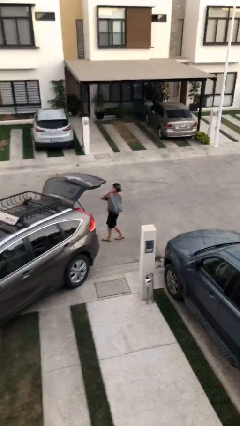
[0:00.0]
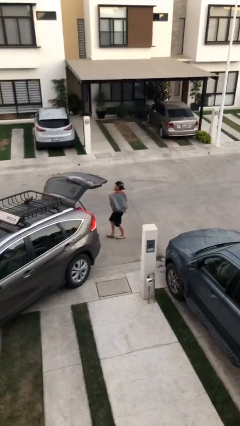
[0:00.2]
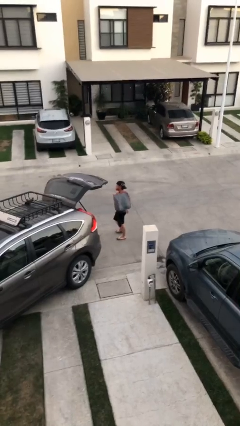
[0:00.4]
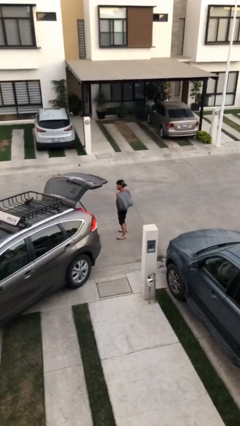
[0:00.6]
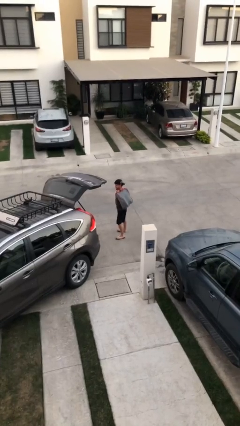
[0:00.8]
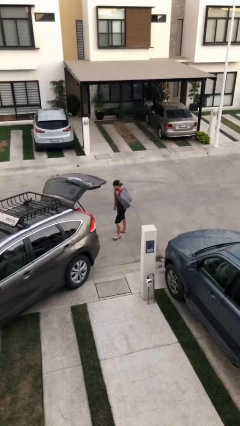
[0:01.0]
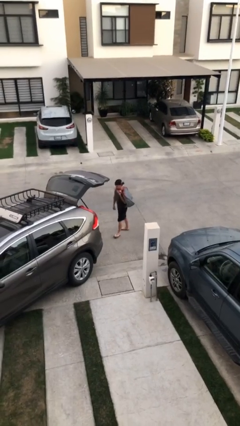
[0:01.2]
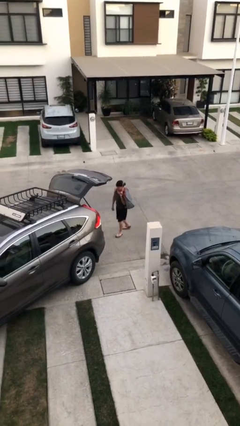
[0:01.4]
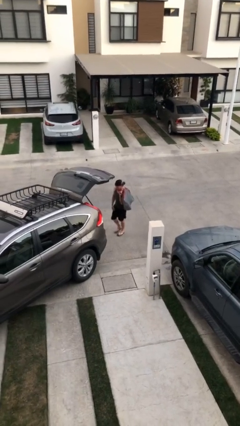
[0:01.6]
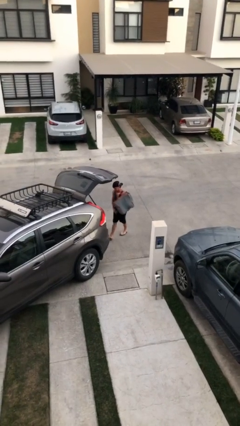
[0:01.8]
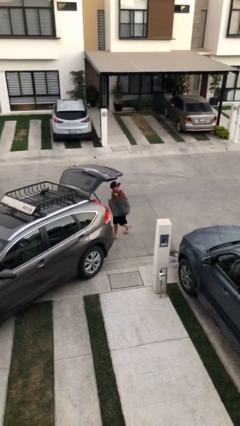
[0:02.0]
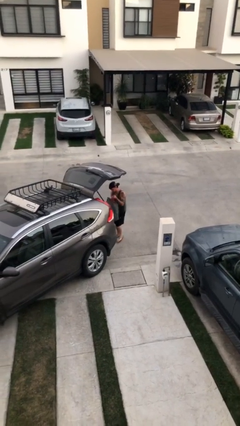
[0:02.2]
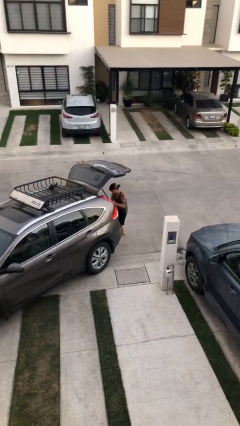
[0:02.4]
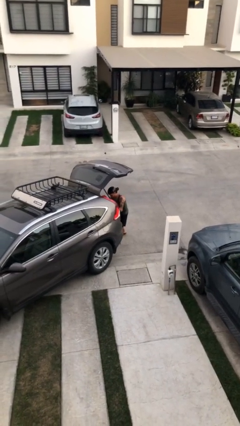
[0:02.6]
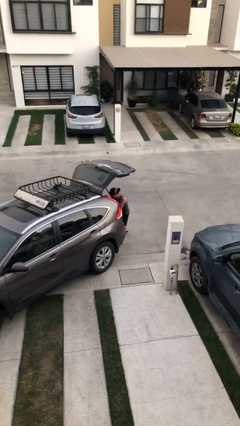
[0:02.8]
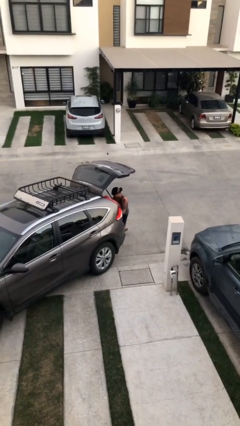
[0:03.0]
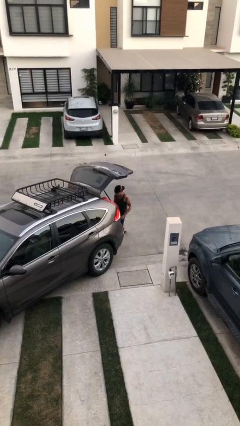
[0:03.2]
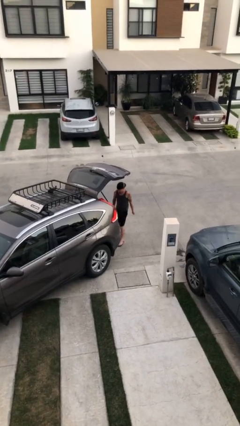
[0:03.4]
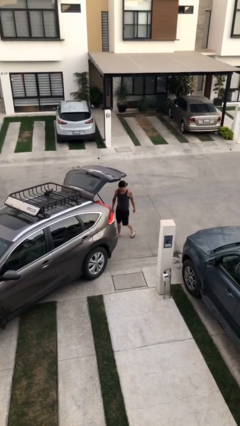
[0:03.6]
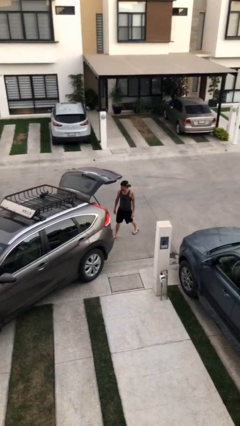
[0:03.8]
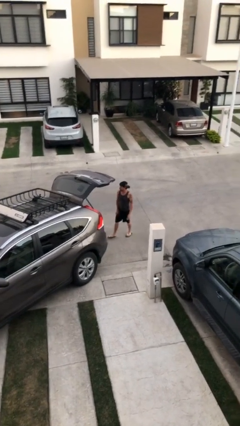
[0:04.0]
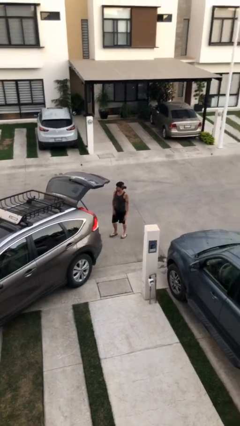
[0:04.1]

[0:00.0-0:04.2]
person loads car

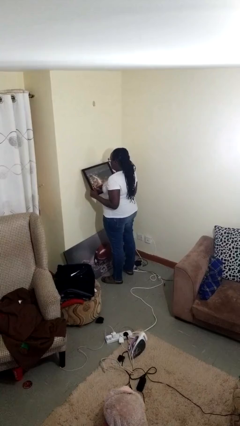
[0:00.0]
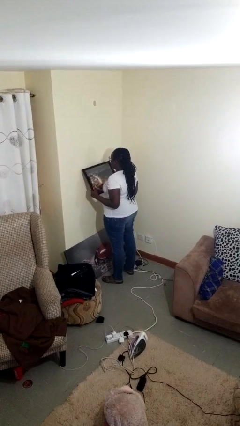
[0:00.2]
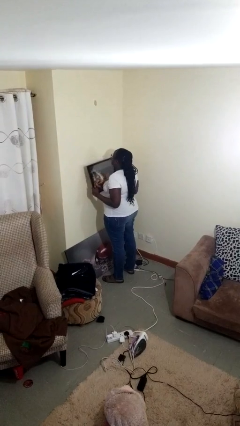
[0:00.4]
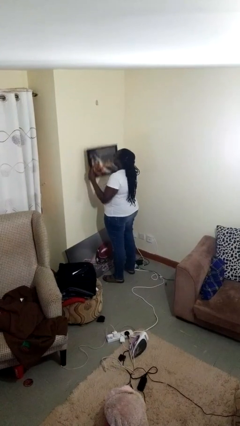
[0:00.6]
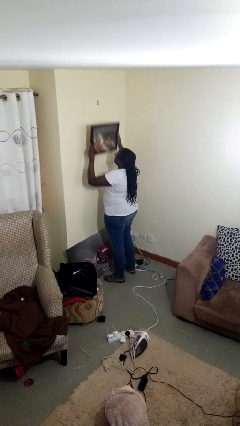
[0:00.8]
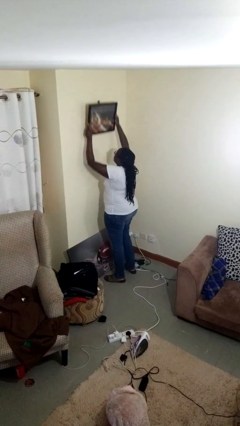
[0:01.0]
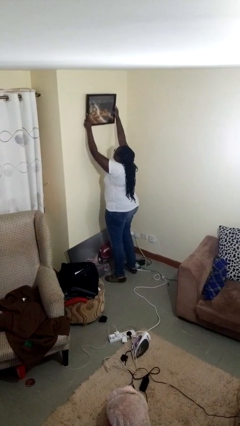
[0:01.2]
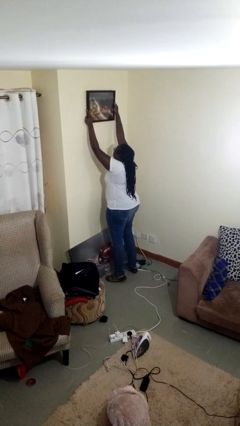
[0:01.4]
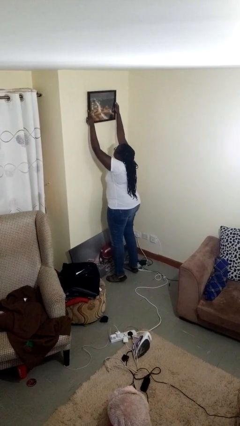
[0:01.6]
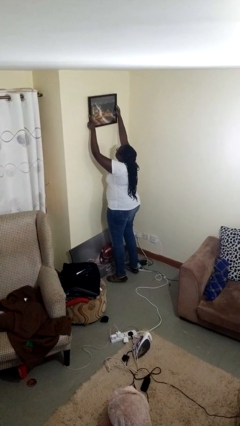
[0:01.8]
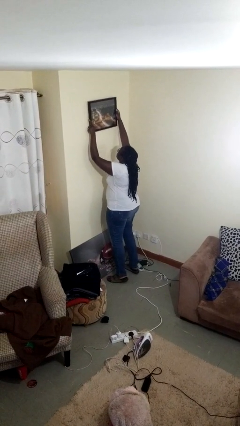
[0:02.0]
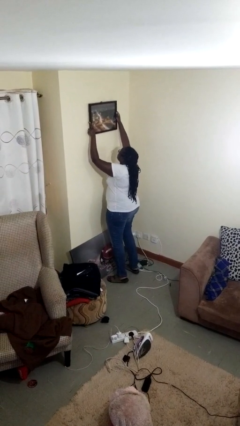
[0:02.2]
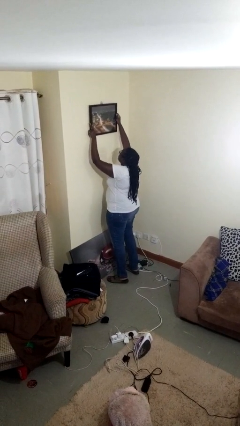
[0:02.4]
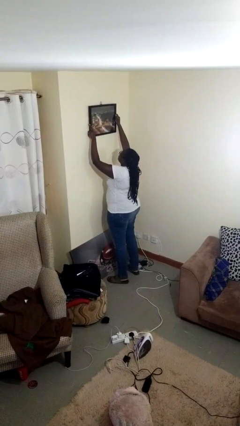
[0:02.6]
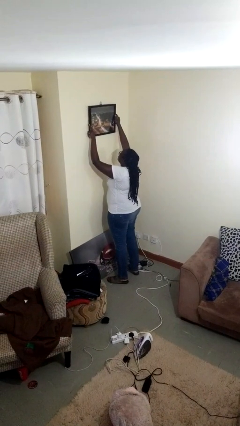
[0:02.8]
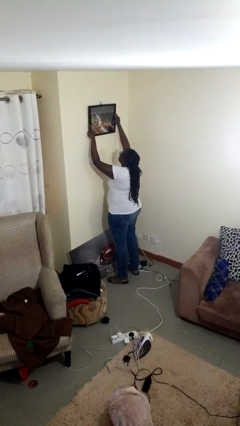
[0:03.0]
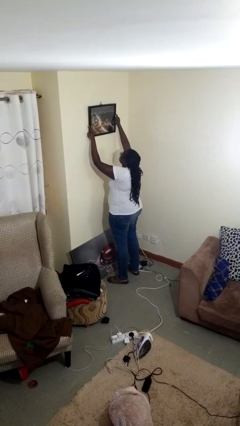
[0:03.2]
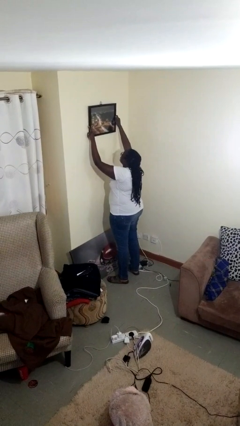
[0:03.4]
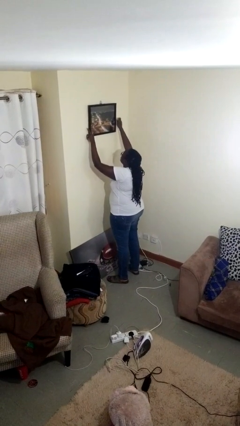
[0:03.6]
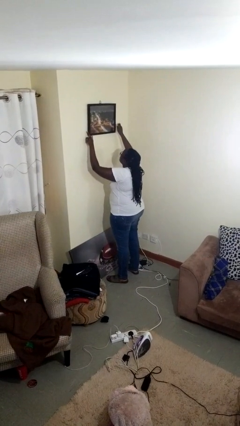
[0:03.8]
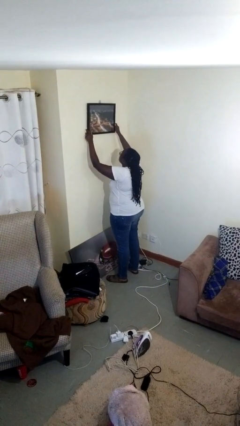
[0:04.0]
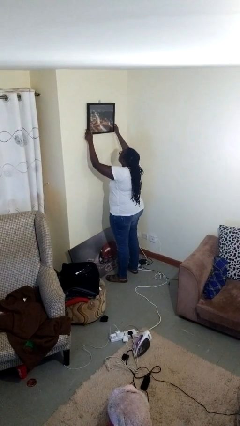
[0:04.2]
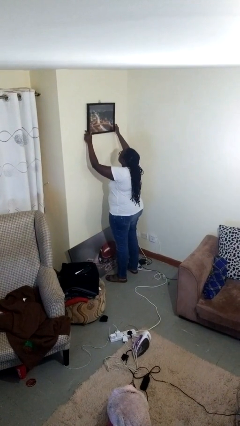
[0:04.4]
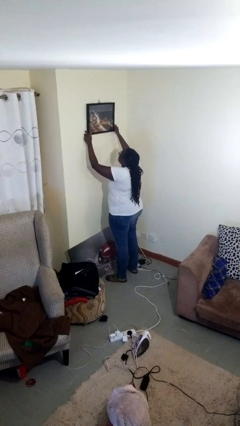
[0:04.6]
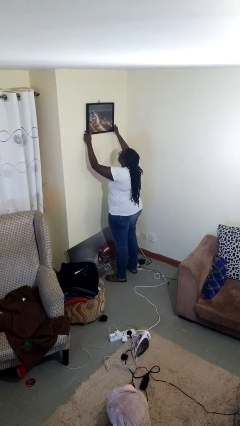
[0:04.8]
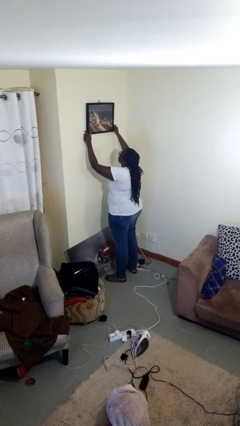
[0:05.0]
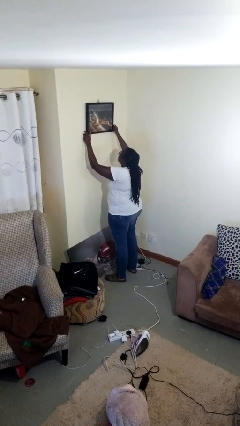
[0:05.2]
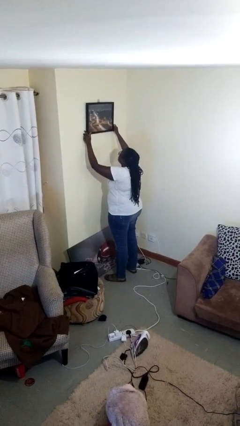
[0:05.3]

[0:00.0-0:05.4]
person puts up picture frame

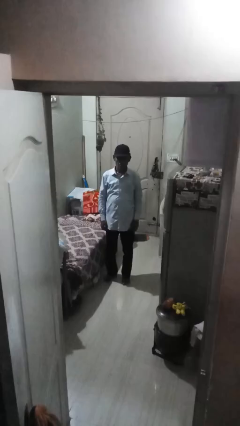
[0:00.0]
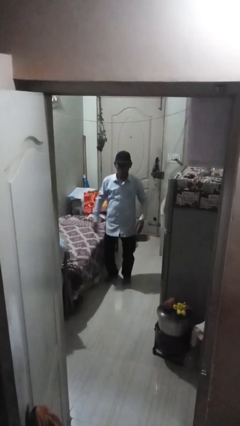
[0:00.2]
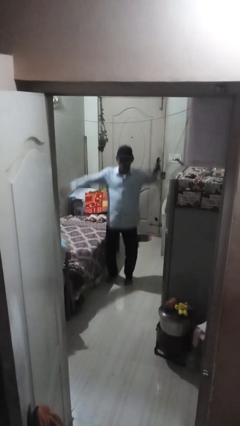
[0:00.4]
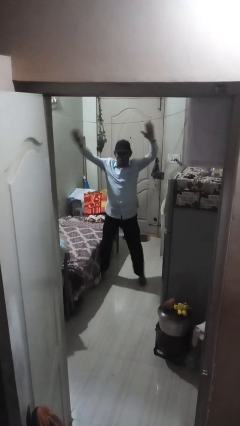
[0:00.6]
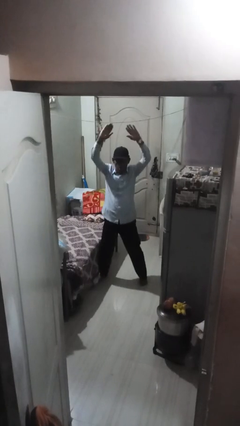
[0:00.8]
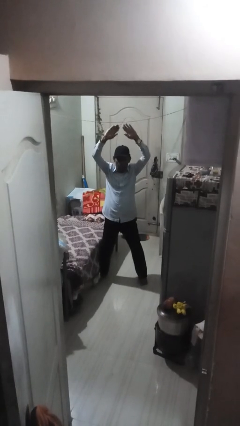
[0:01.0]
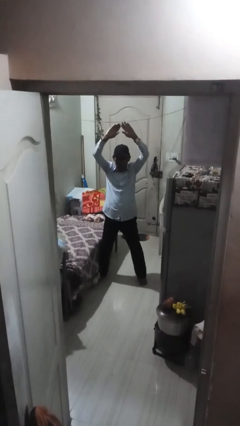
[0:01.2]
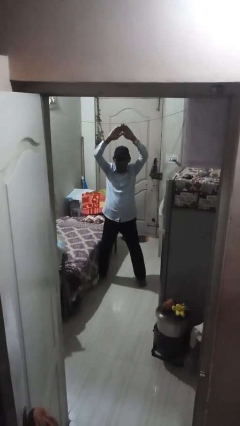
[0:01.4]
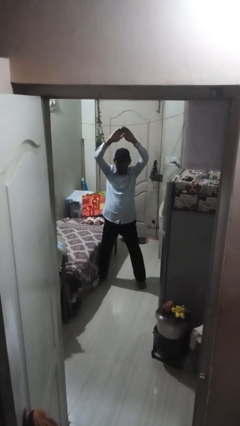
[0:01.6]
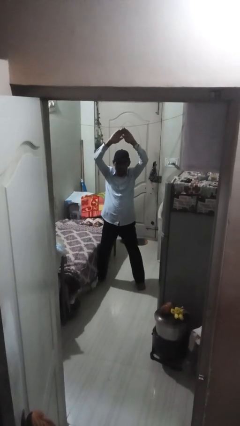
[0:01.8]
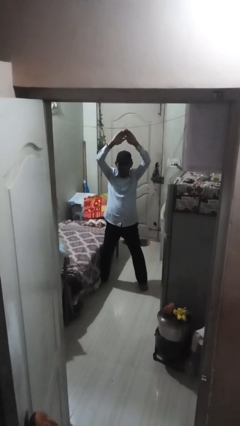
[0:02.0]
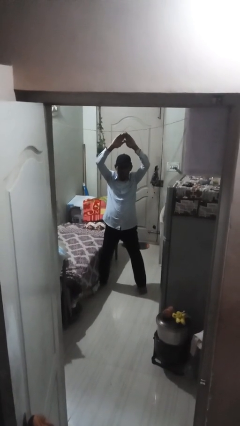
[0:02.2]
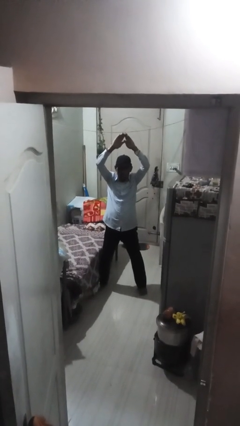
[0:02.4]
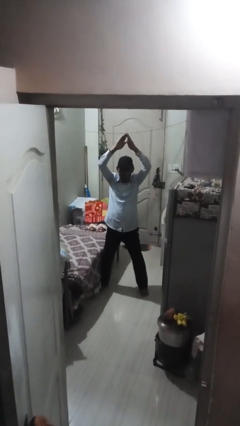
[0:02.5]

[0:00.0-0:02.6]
person exercises with jumping jacks

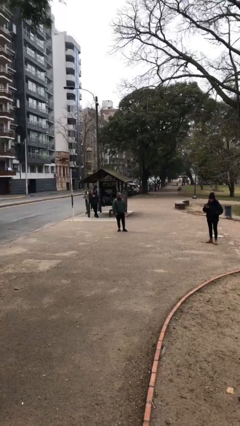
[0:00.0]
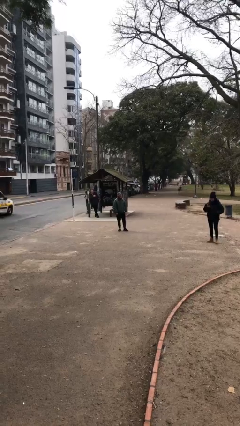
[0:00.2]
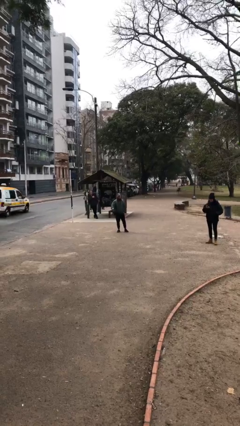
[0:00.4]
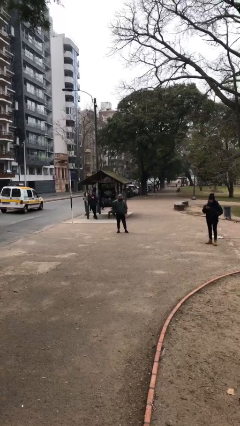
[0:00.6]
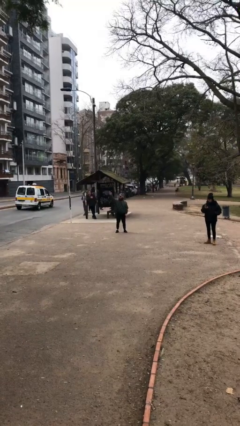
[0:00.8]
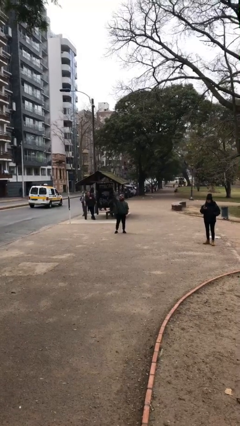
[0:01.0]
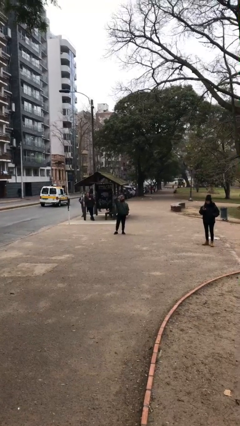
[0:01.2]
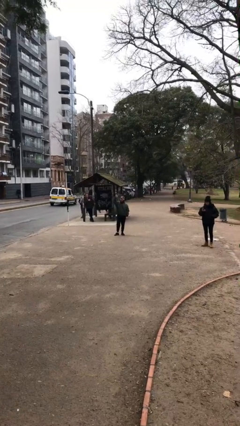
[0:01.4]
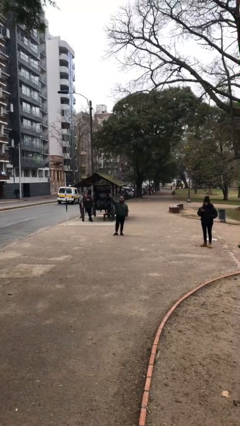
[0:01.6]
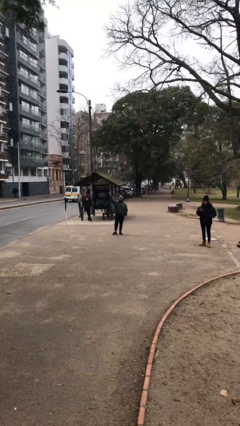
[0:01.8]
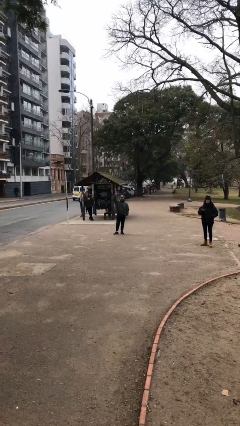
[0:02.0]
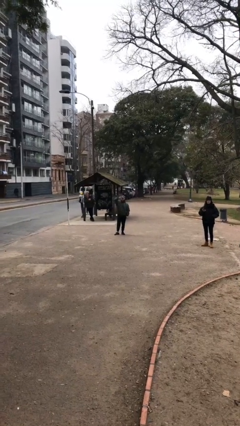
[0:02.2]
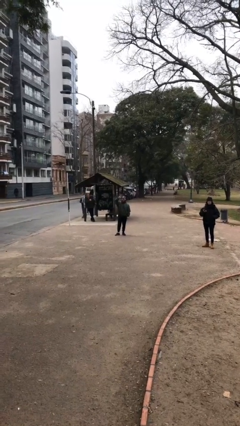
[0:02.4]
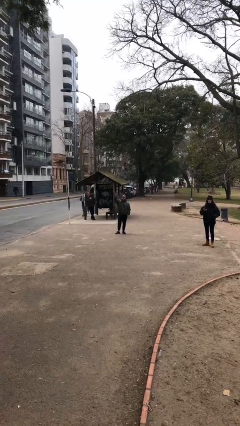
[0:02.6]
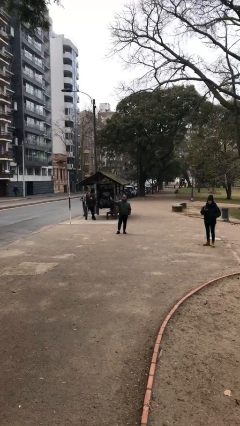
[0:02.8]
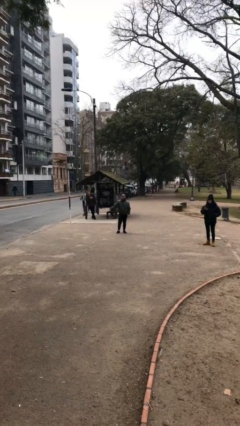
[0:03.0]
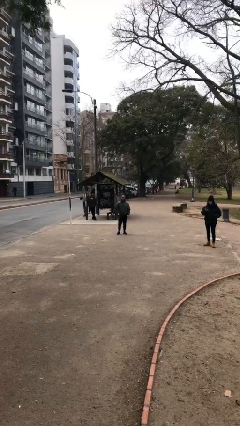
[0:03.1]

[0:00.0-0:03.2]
person waves at person

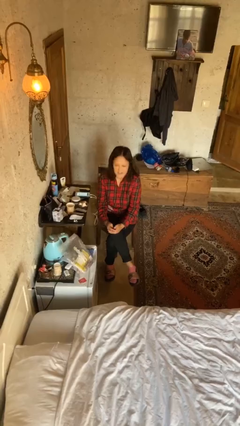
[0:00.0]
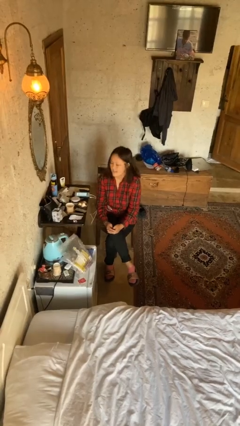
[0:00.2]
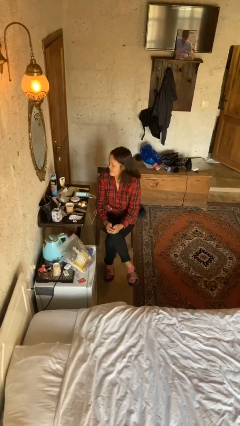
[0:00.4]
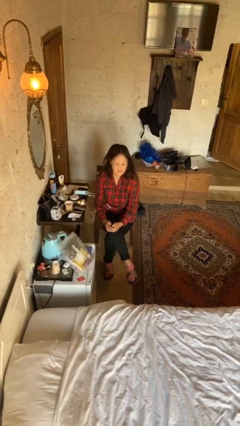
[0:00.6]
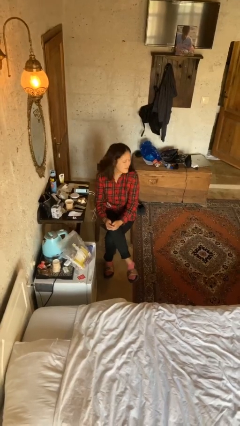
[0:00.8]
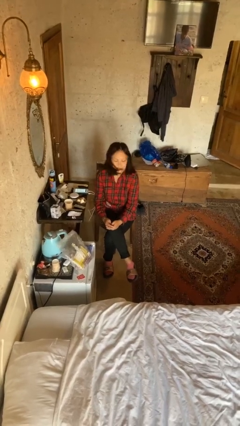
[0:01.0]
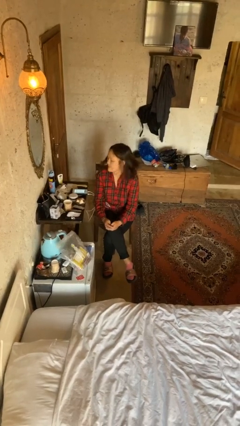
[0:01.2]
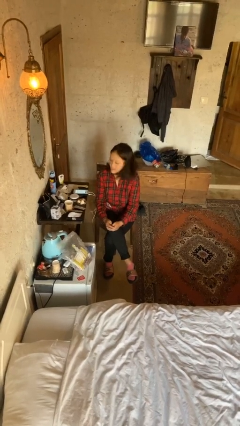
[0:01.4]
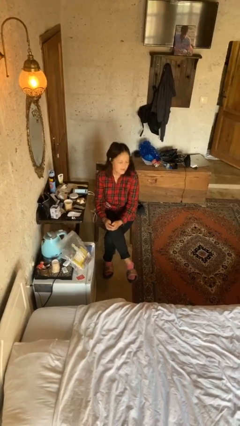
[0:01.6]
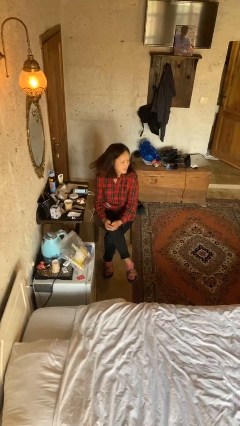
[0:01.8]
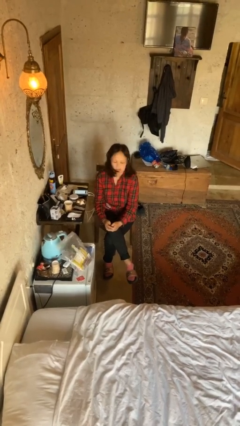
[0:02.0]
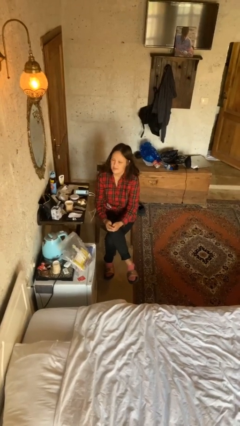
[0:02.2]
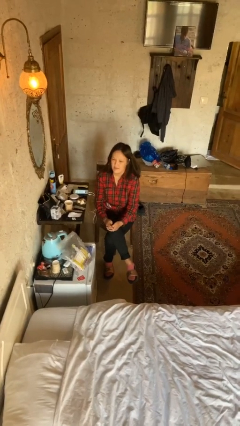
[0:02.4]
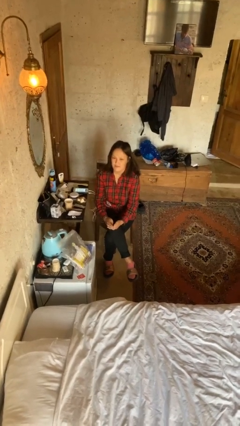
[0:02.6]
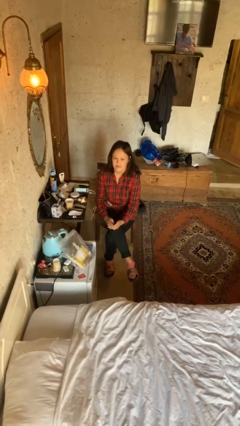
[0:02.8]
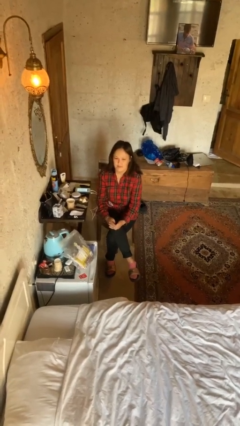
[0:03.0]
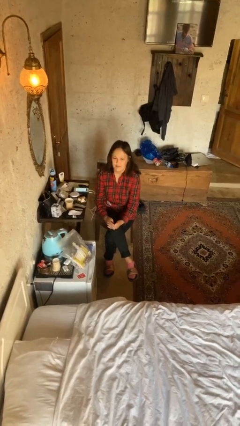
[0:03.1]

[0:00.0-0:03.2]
person shakes head
